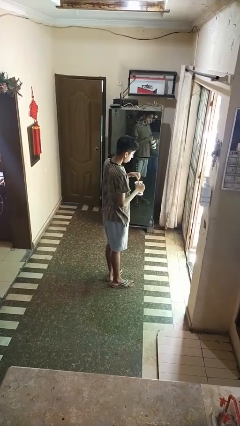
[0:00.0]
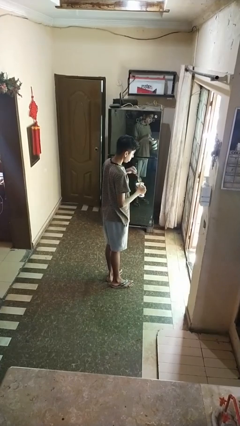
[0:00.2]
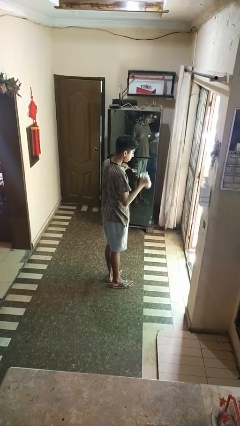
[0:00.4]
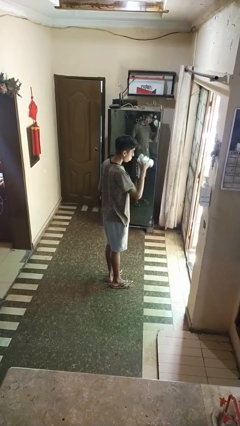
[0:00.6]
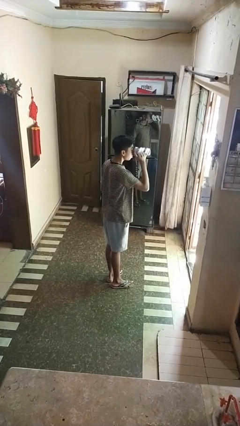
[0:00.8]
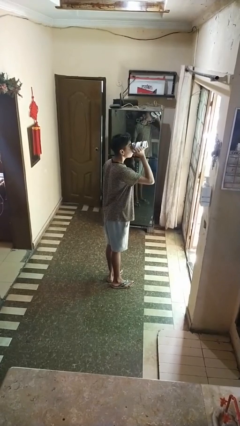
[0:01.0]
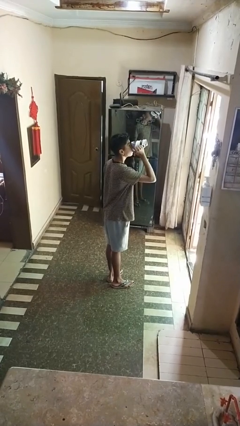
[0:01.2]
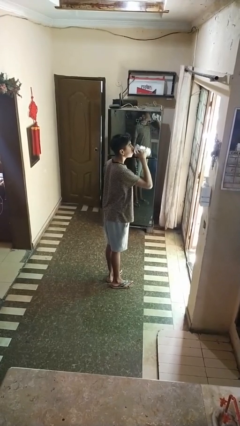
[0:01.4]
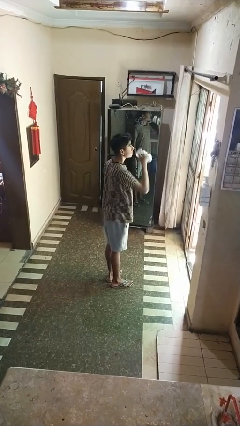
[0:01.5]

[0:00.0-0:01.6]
person drinks from mug

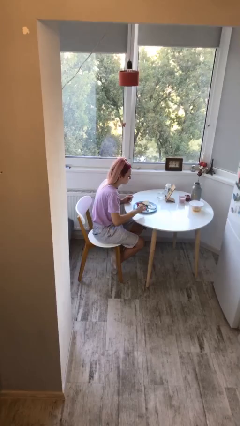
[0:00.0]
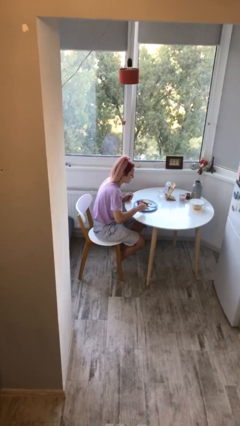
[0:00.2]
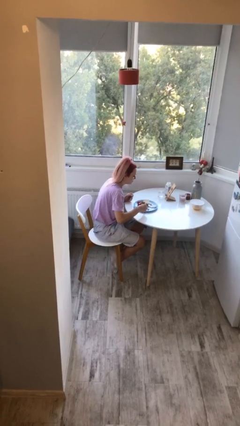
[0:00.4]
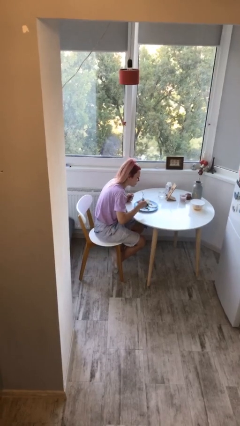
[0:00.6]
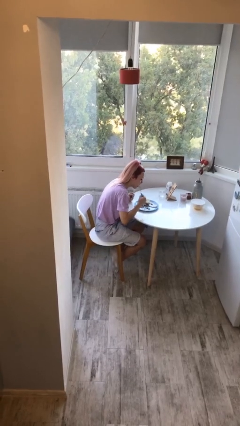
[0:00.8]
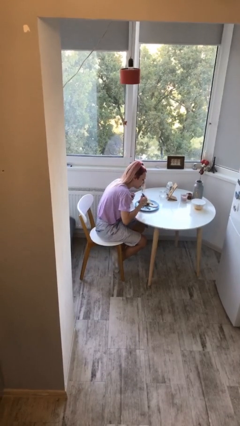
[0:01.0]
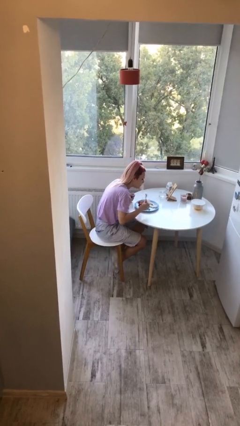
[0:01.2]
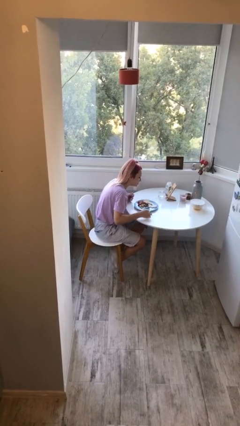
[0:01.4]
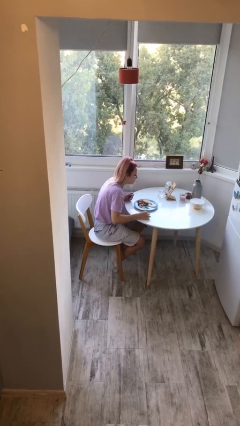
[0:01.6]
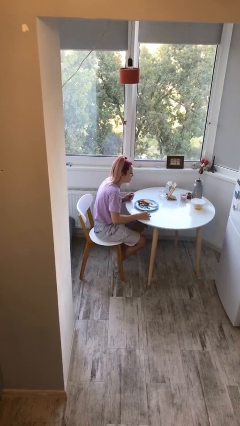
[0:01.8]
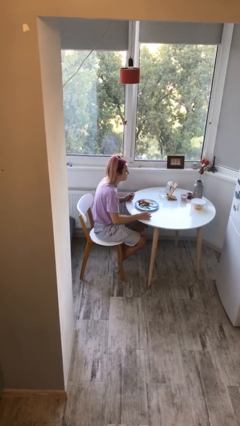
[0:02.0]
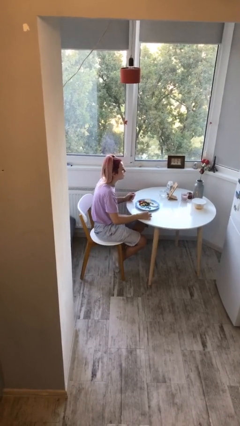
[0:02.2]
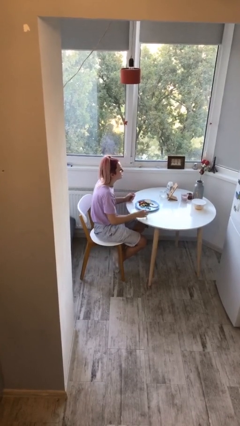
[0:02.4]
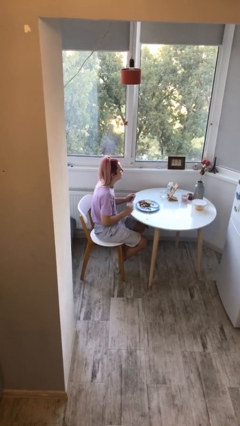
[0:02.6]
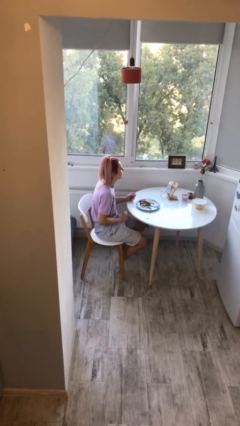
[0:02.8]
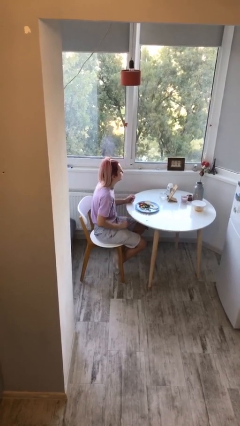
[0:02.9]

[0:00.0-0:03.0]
person eats with utensil

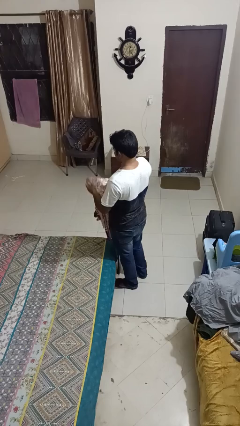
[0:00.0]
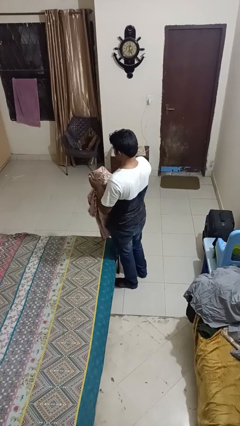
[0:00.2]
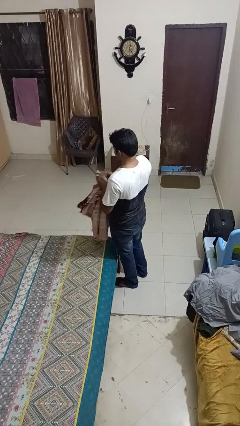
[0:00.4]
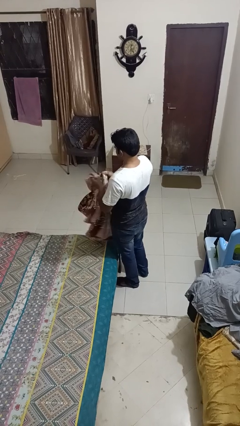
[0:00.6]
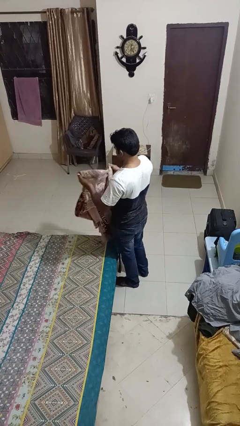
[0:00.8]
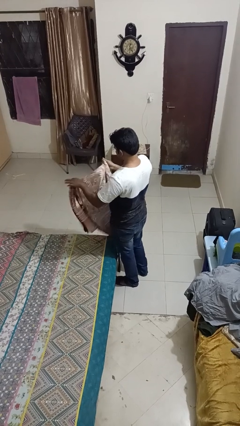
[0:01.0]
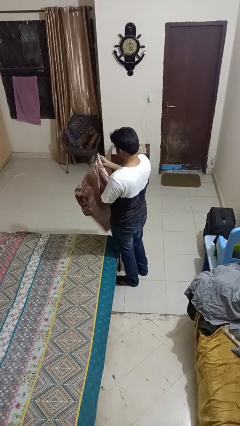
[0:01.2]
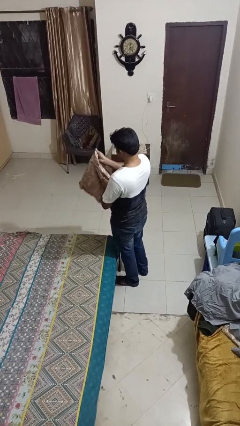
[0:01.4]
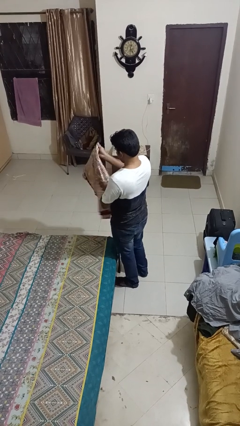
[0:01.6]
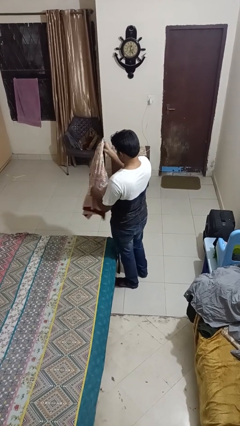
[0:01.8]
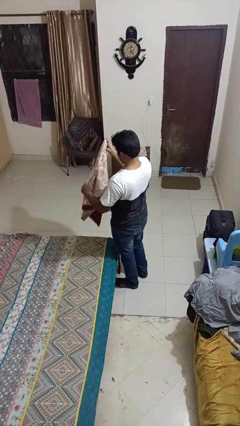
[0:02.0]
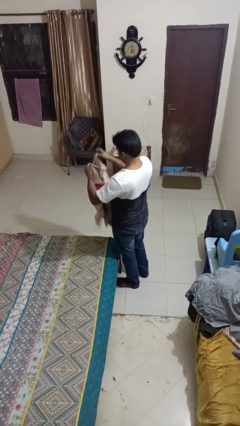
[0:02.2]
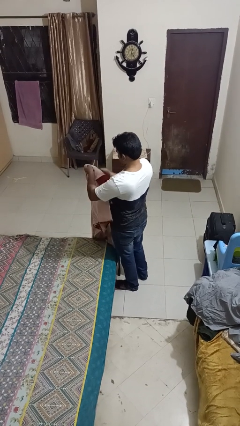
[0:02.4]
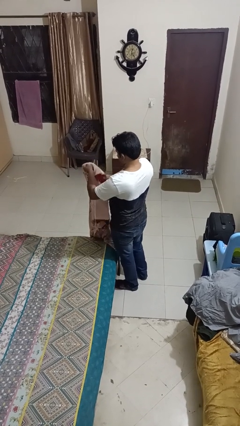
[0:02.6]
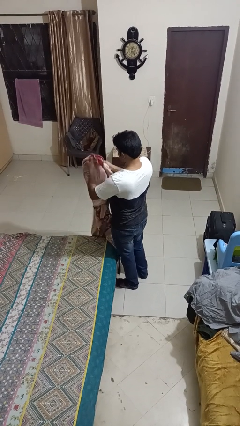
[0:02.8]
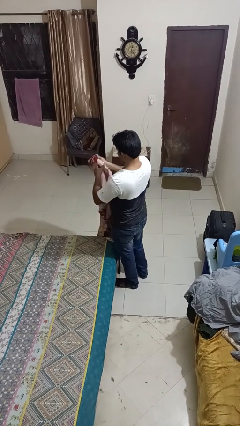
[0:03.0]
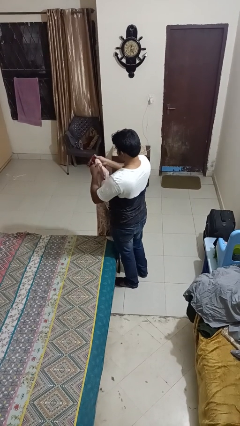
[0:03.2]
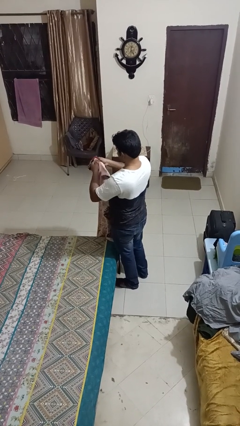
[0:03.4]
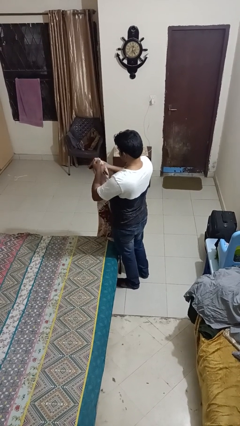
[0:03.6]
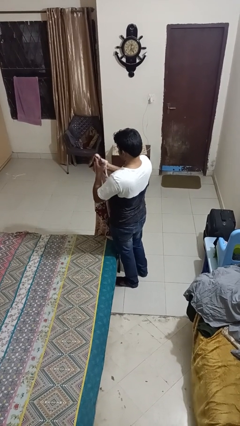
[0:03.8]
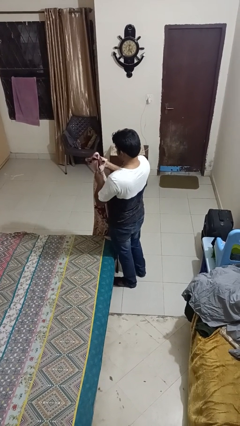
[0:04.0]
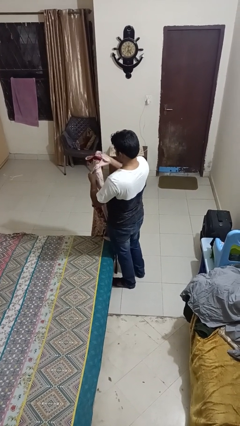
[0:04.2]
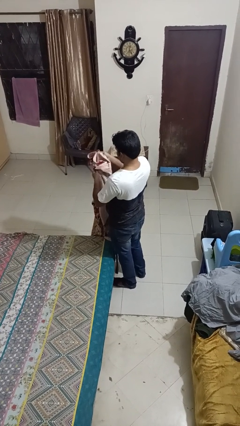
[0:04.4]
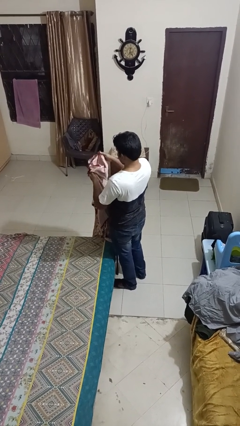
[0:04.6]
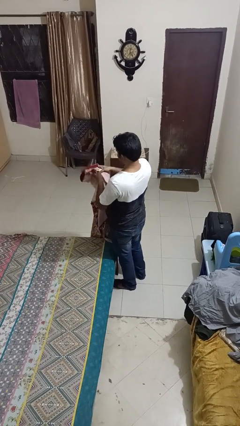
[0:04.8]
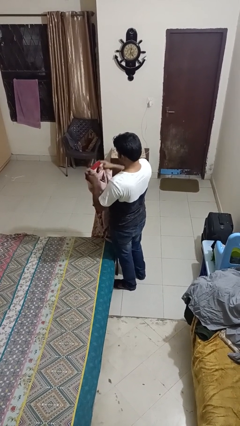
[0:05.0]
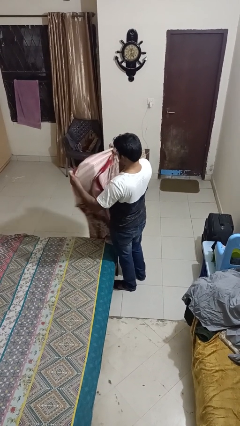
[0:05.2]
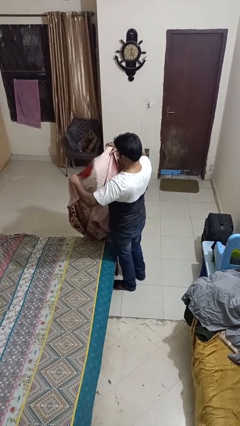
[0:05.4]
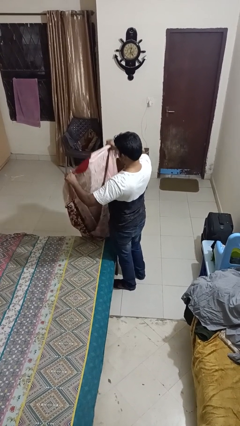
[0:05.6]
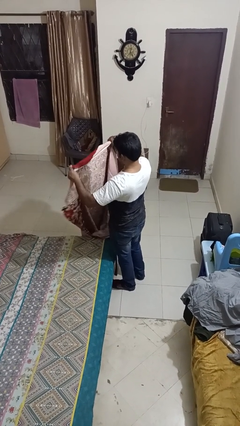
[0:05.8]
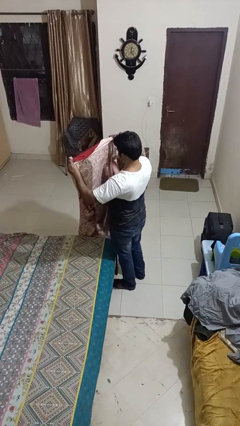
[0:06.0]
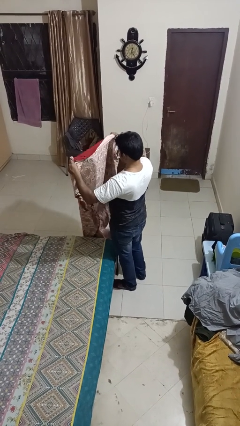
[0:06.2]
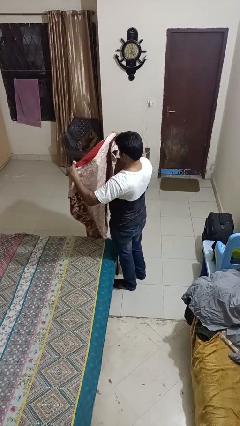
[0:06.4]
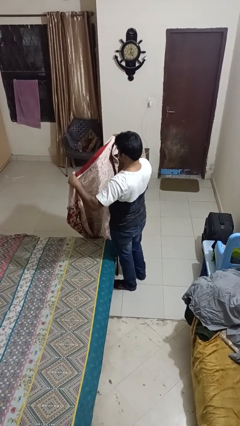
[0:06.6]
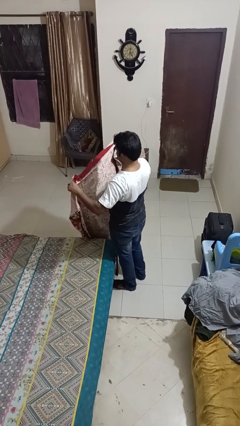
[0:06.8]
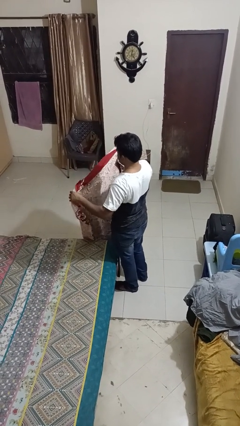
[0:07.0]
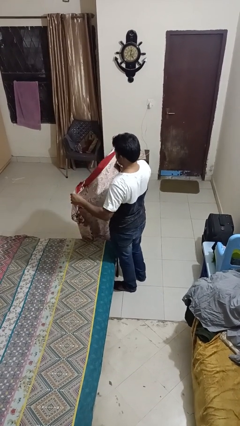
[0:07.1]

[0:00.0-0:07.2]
person unfolds blanket

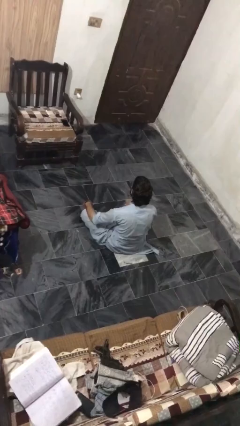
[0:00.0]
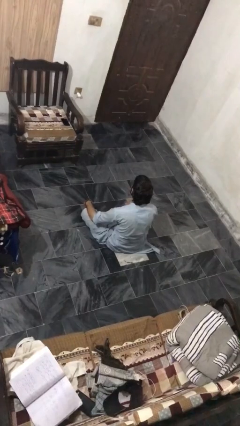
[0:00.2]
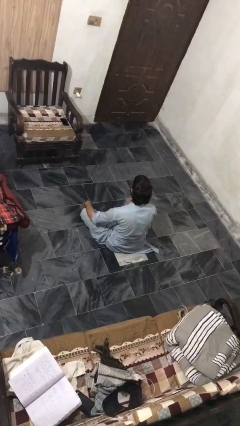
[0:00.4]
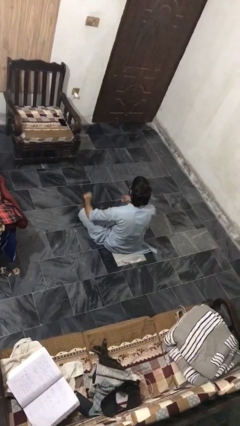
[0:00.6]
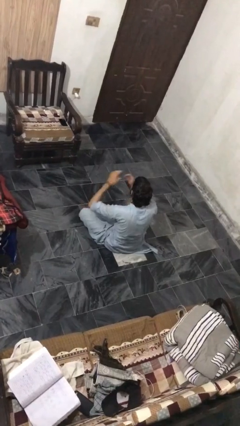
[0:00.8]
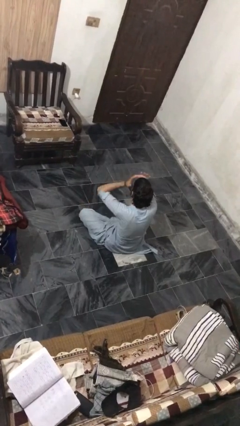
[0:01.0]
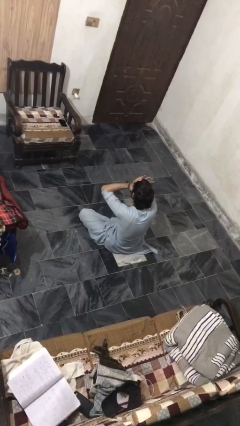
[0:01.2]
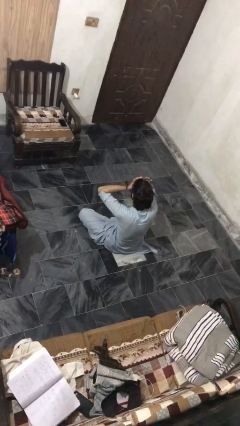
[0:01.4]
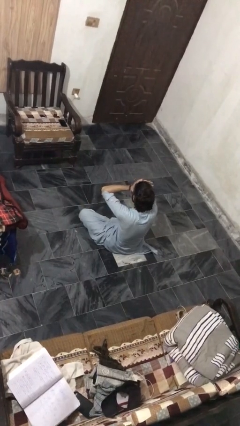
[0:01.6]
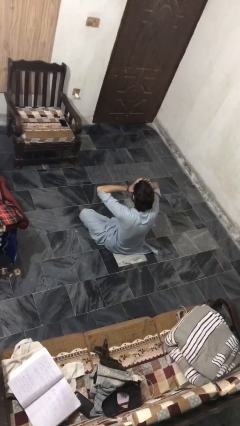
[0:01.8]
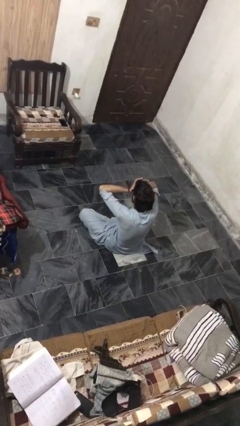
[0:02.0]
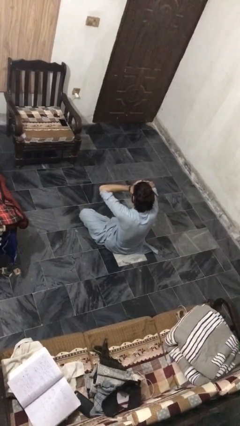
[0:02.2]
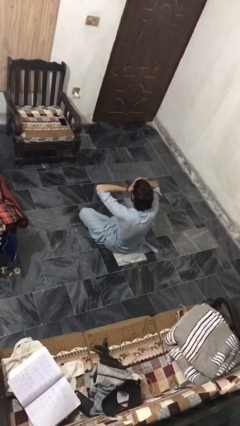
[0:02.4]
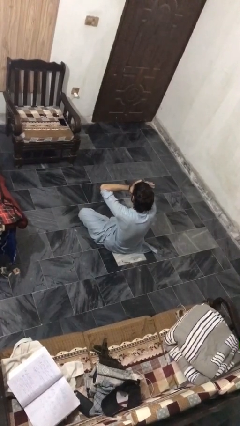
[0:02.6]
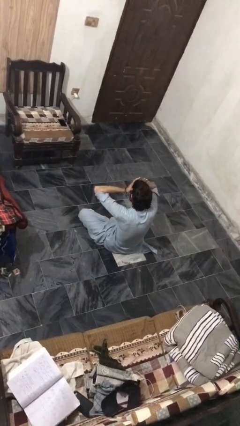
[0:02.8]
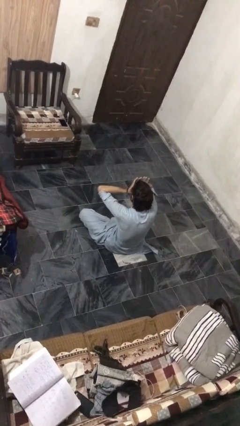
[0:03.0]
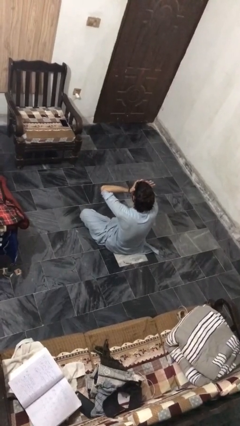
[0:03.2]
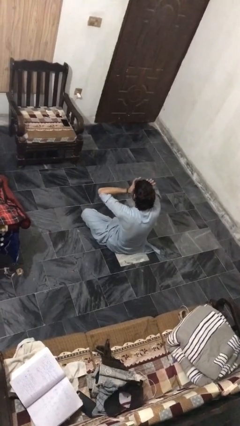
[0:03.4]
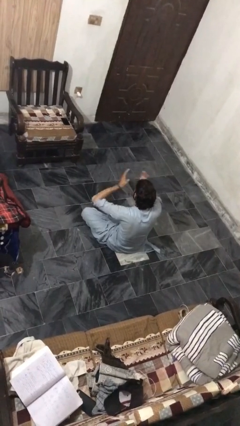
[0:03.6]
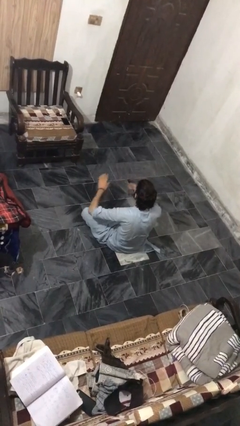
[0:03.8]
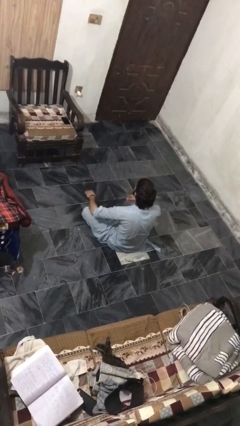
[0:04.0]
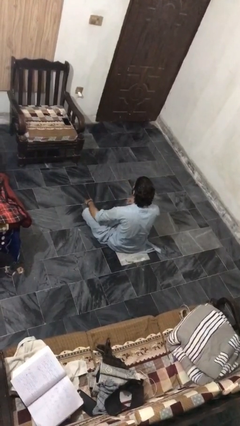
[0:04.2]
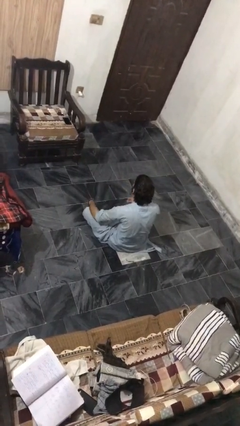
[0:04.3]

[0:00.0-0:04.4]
person rubs eyes

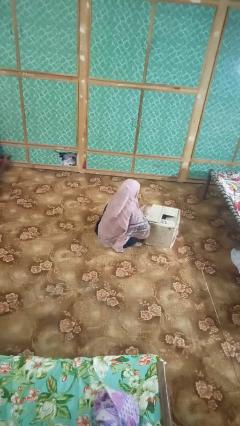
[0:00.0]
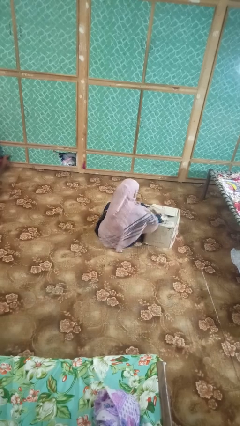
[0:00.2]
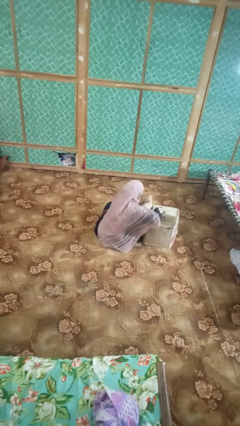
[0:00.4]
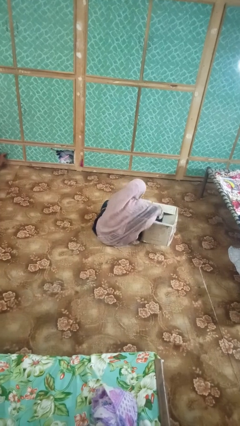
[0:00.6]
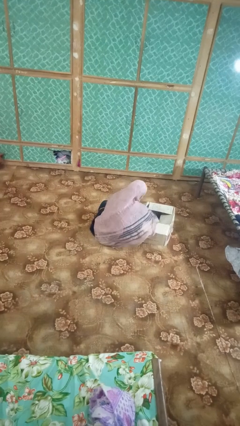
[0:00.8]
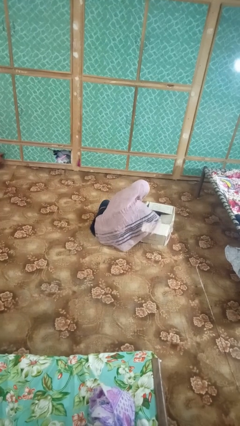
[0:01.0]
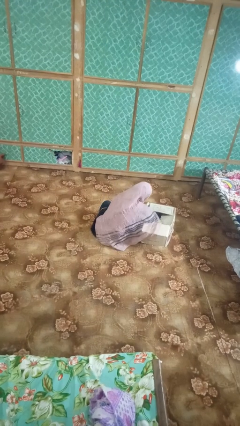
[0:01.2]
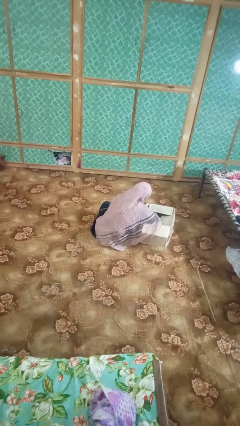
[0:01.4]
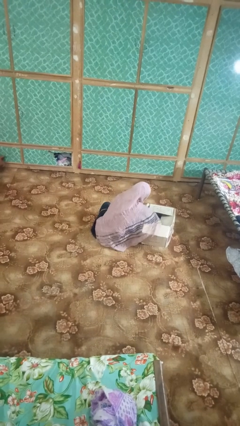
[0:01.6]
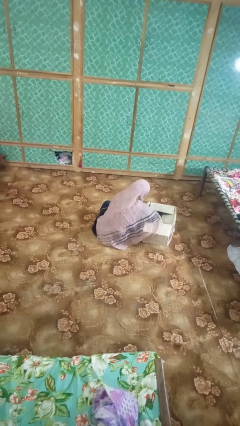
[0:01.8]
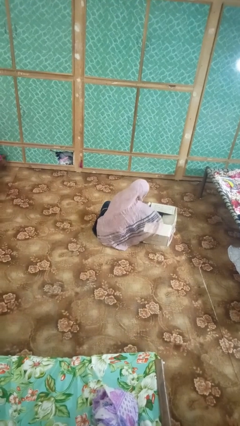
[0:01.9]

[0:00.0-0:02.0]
person searches in box
